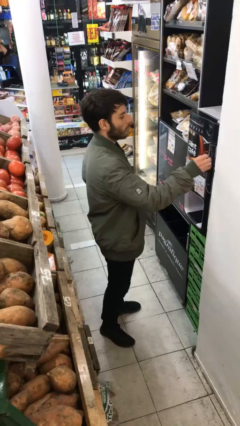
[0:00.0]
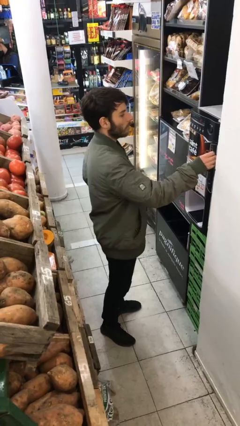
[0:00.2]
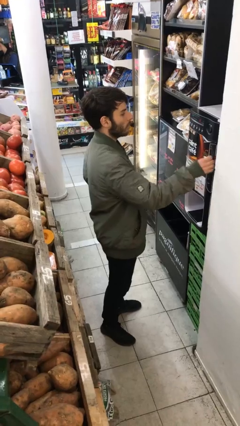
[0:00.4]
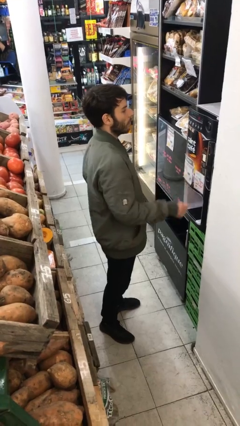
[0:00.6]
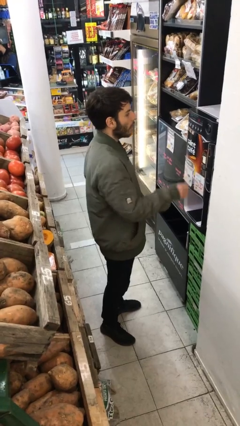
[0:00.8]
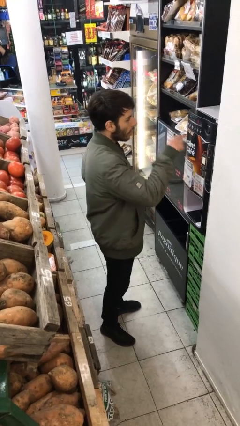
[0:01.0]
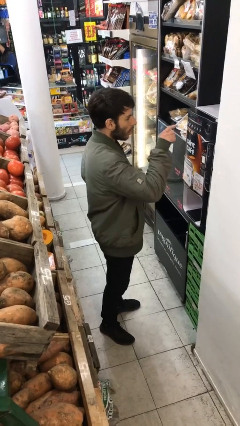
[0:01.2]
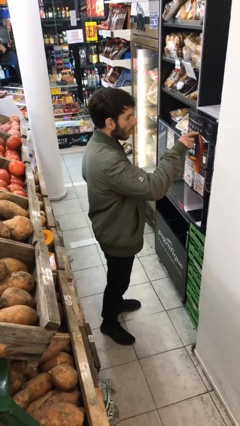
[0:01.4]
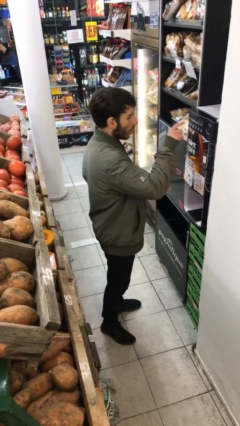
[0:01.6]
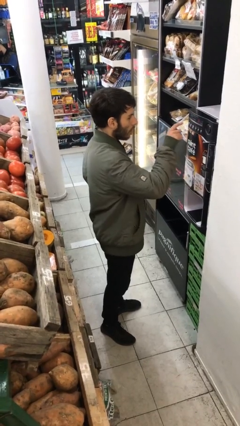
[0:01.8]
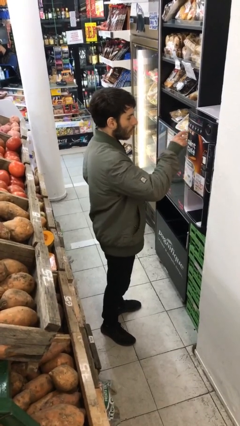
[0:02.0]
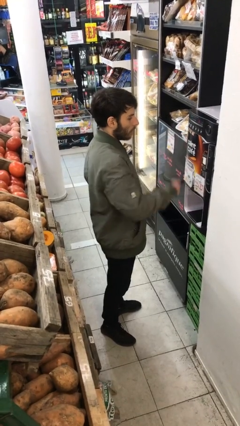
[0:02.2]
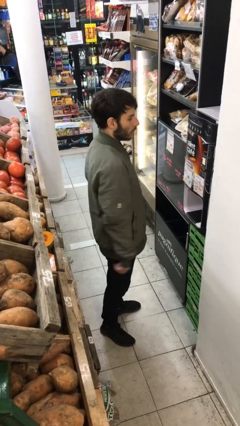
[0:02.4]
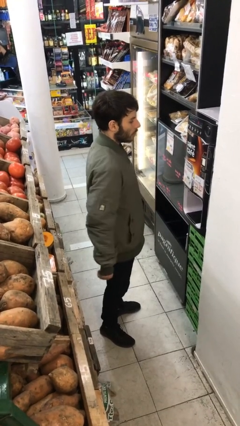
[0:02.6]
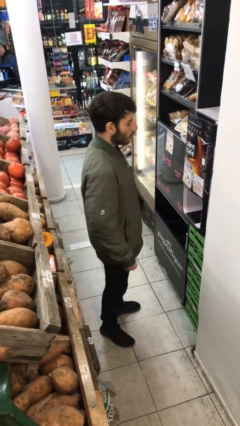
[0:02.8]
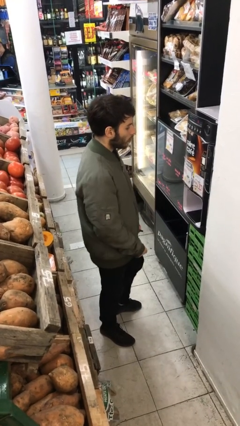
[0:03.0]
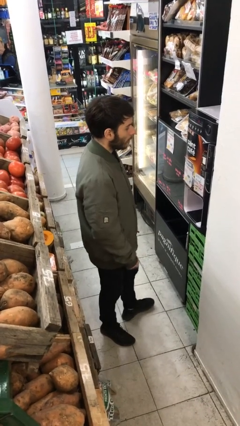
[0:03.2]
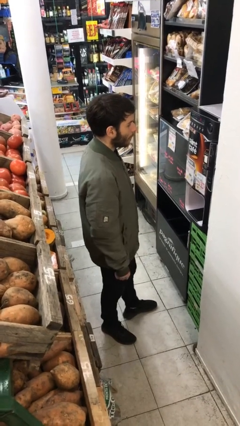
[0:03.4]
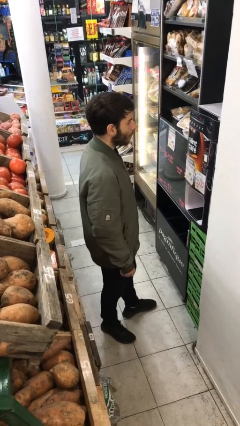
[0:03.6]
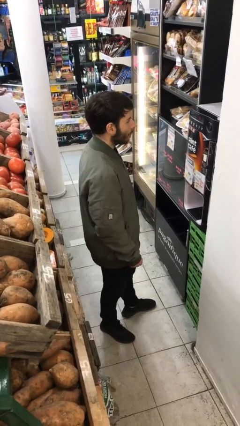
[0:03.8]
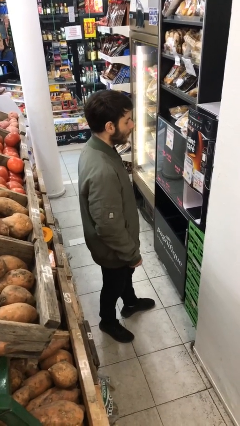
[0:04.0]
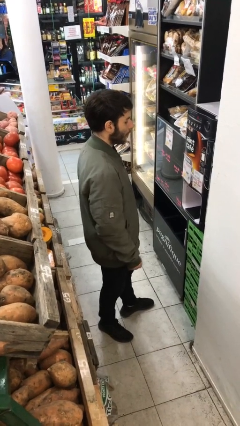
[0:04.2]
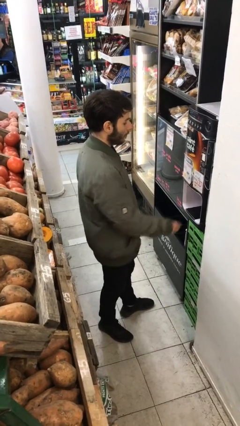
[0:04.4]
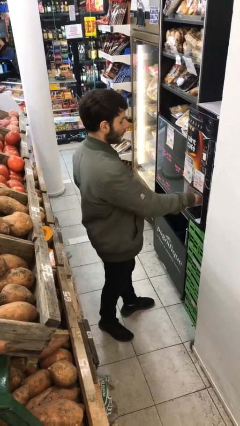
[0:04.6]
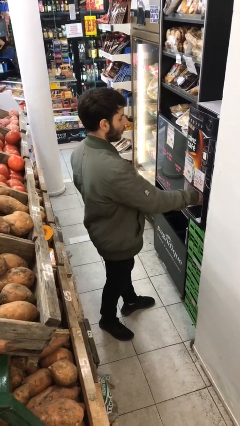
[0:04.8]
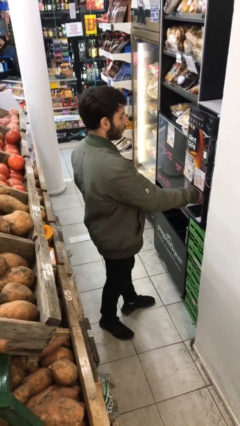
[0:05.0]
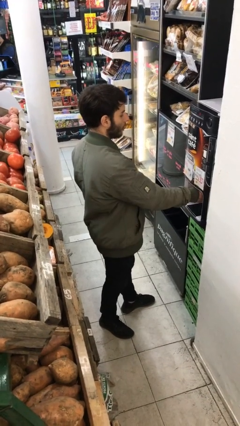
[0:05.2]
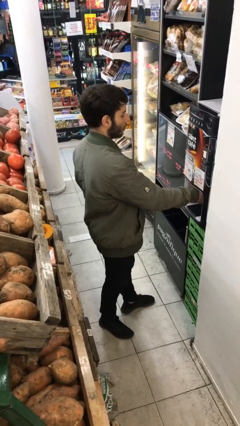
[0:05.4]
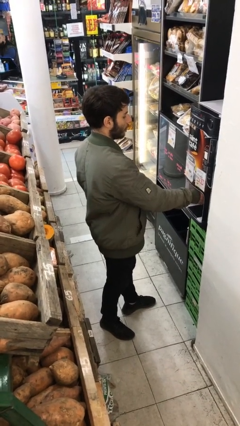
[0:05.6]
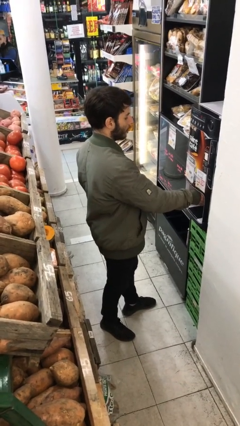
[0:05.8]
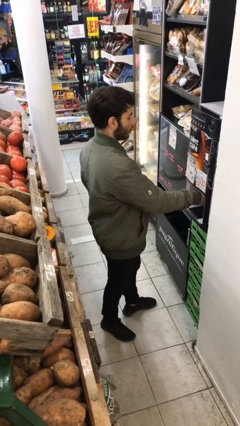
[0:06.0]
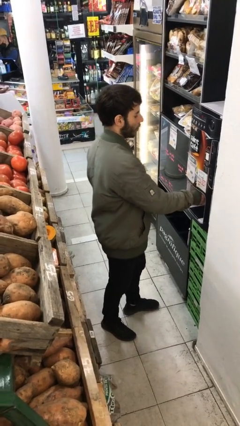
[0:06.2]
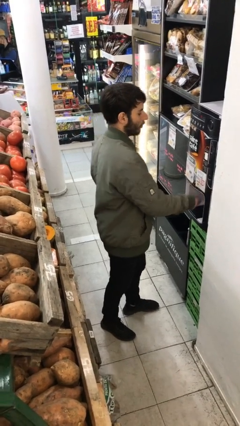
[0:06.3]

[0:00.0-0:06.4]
person purchases from machine

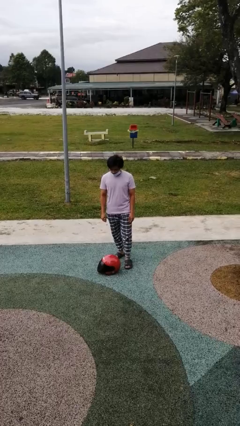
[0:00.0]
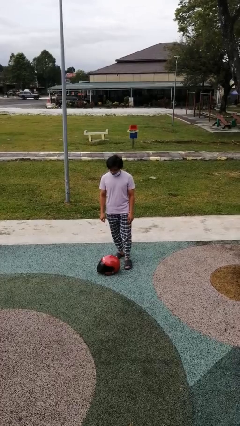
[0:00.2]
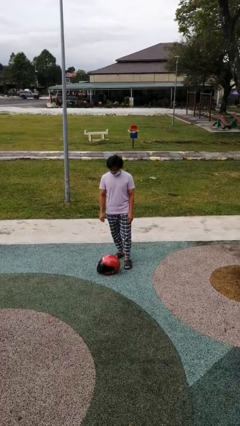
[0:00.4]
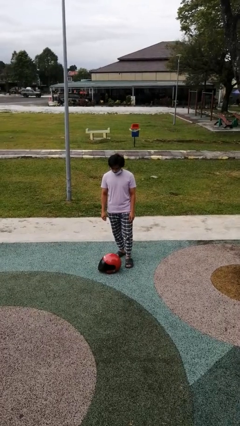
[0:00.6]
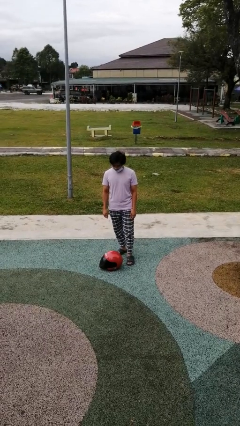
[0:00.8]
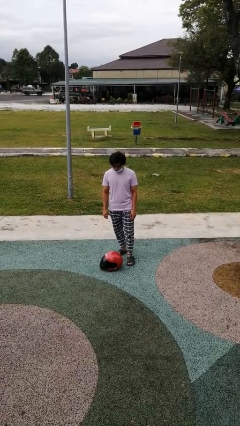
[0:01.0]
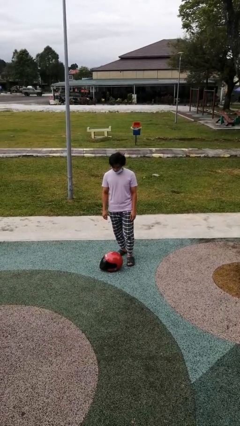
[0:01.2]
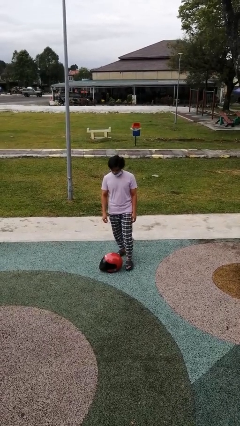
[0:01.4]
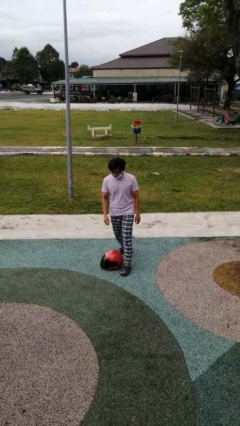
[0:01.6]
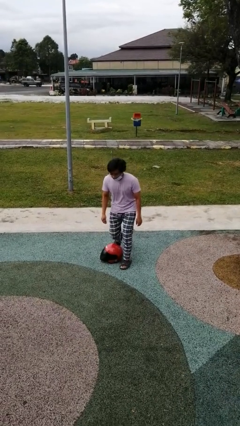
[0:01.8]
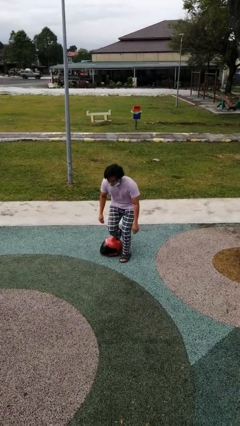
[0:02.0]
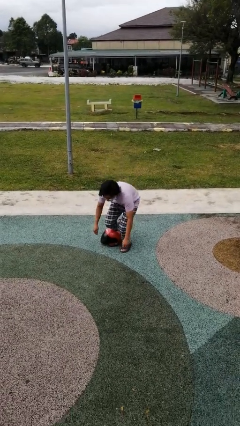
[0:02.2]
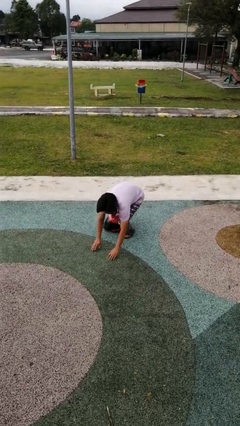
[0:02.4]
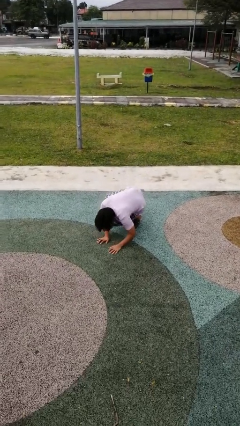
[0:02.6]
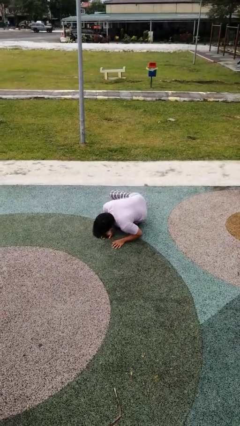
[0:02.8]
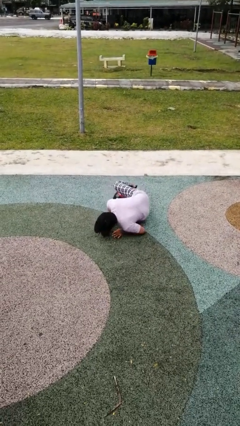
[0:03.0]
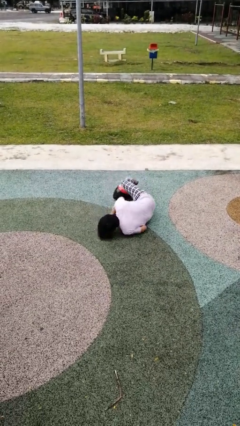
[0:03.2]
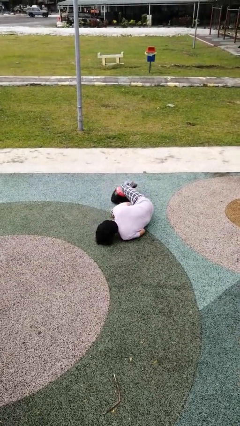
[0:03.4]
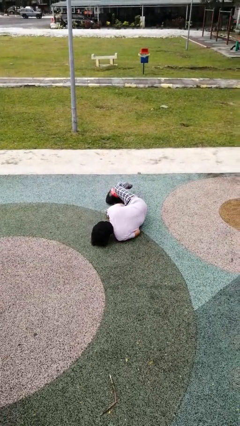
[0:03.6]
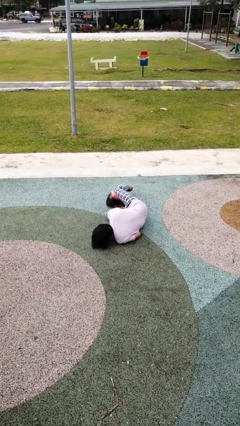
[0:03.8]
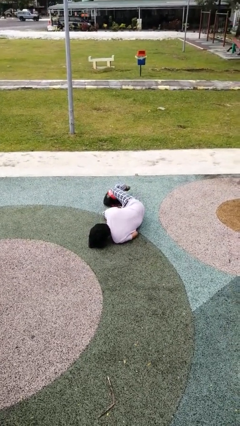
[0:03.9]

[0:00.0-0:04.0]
person trips on object on floor

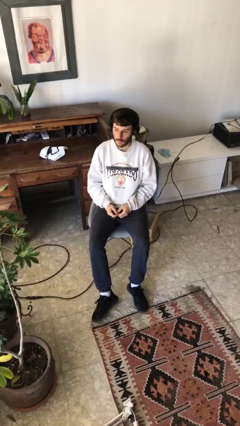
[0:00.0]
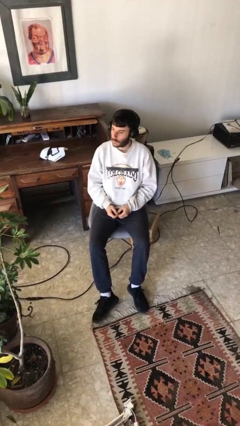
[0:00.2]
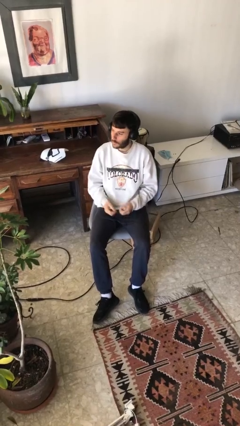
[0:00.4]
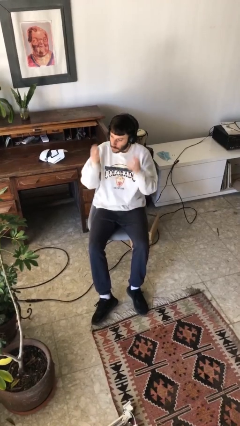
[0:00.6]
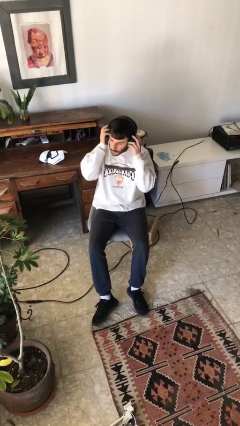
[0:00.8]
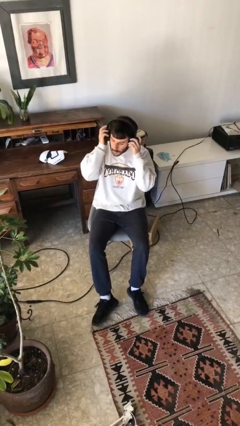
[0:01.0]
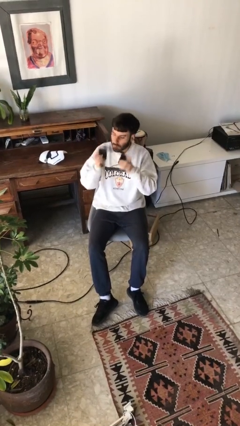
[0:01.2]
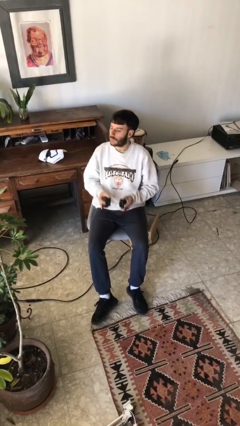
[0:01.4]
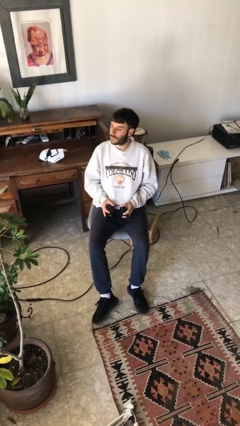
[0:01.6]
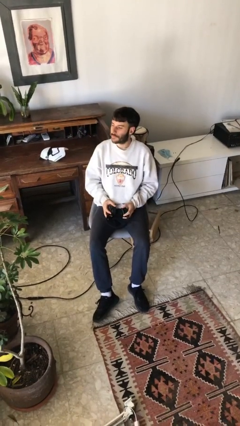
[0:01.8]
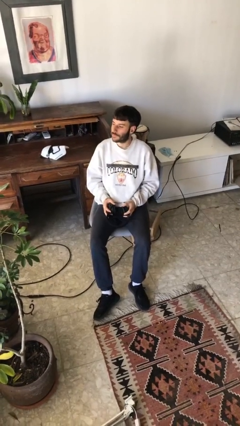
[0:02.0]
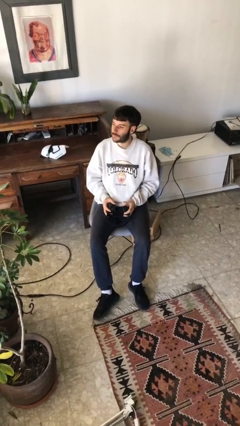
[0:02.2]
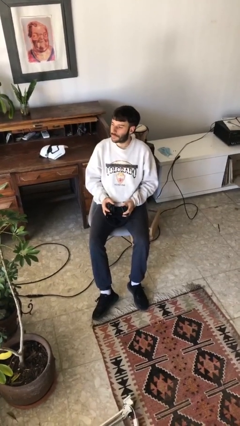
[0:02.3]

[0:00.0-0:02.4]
person takes off headphones

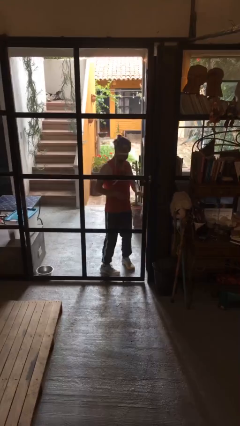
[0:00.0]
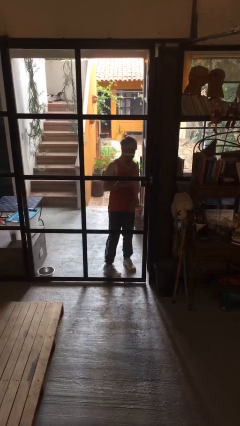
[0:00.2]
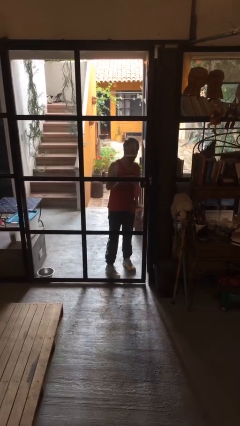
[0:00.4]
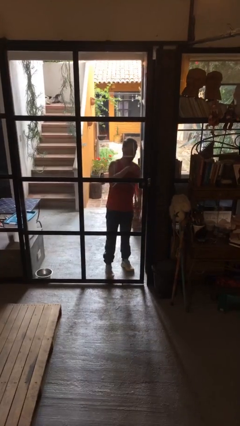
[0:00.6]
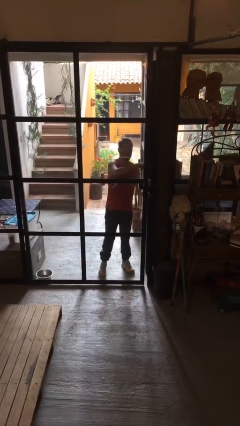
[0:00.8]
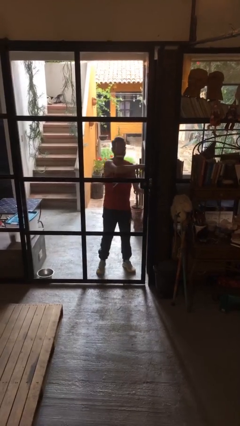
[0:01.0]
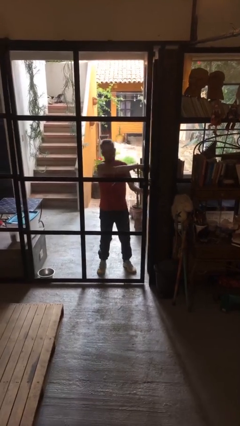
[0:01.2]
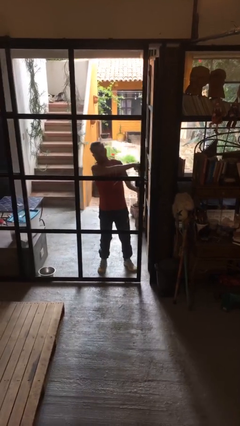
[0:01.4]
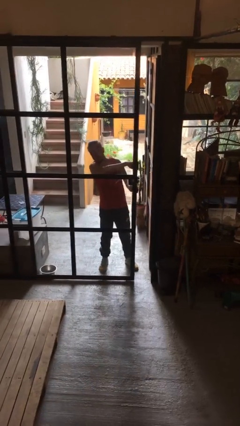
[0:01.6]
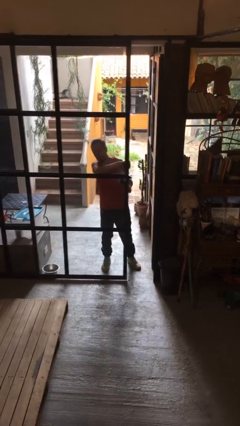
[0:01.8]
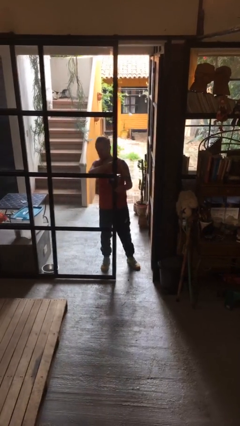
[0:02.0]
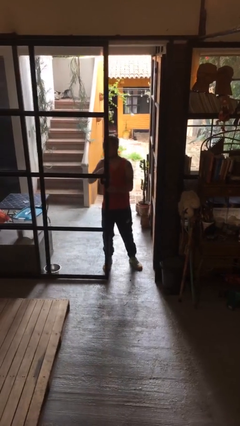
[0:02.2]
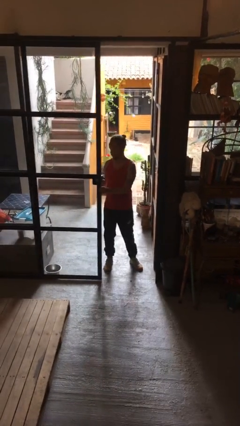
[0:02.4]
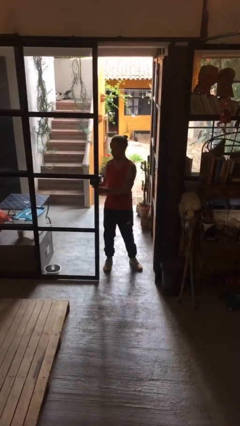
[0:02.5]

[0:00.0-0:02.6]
person opens sliding door

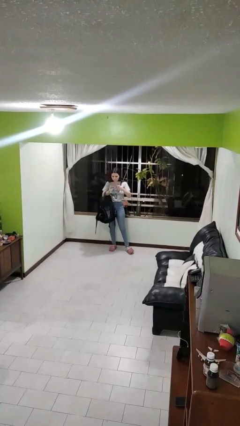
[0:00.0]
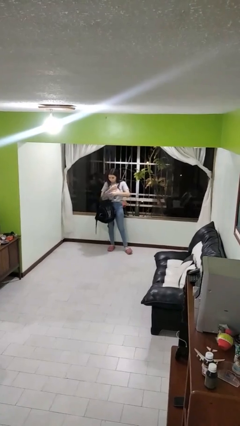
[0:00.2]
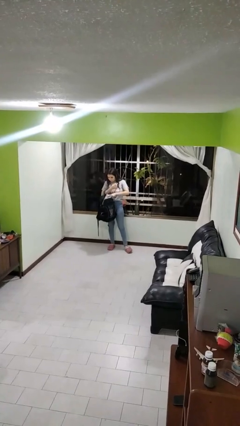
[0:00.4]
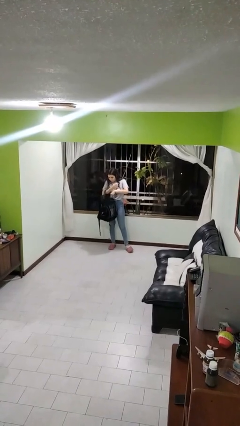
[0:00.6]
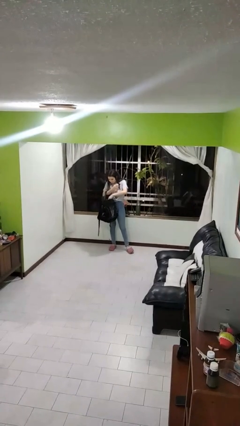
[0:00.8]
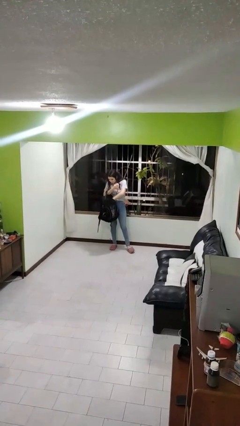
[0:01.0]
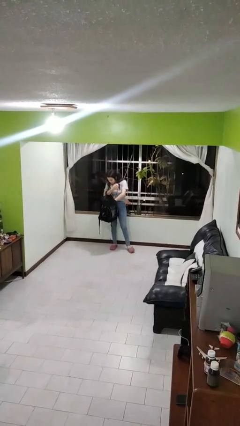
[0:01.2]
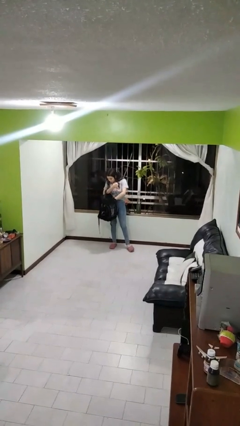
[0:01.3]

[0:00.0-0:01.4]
person puts object into backpack

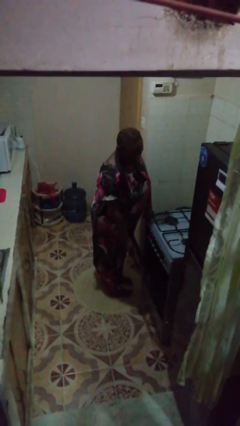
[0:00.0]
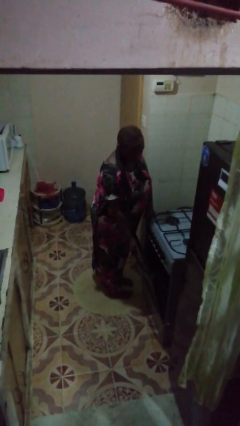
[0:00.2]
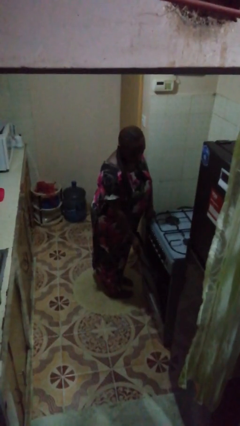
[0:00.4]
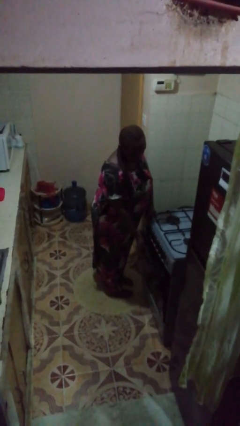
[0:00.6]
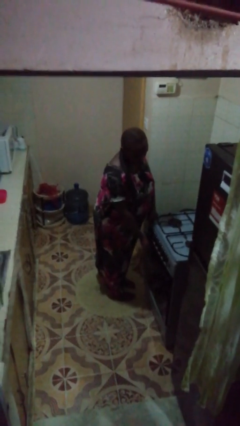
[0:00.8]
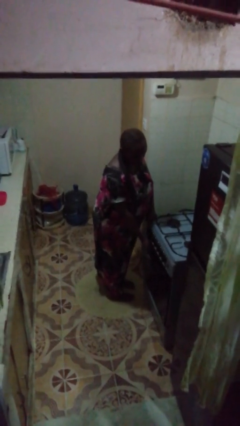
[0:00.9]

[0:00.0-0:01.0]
person closes oven door
